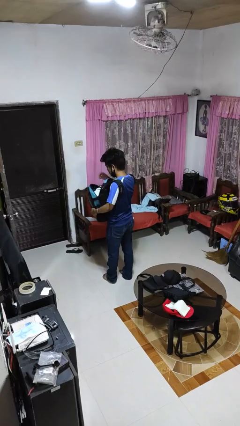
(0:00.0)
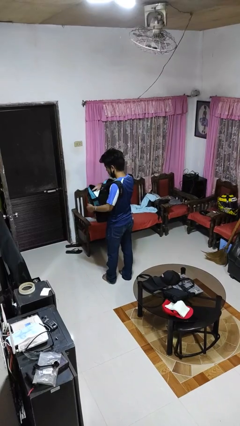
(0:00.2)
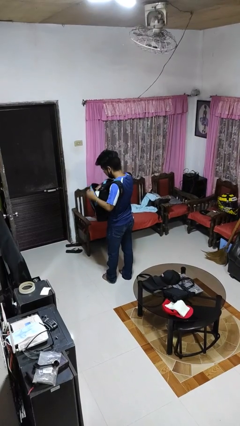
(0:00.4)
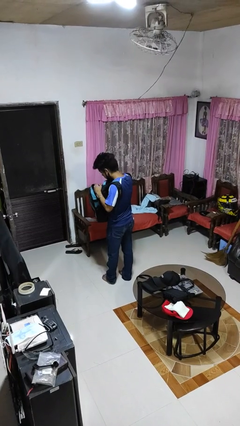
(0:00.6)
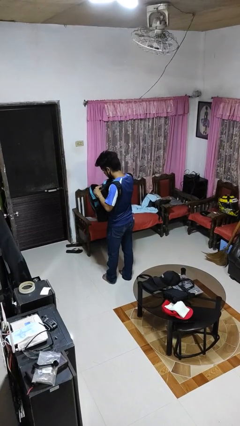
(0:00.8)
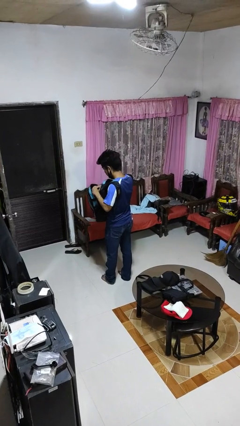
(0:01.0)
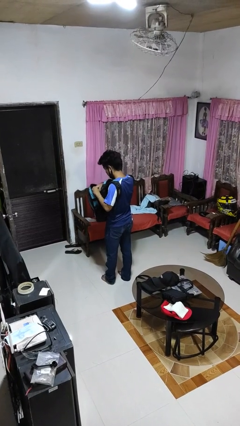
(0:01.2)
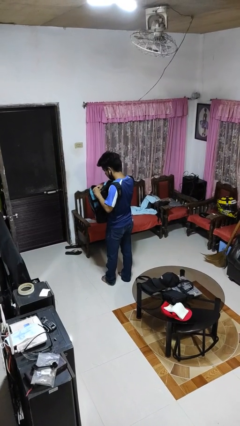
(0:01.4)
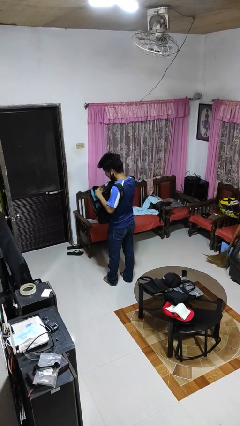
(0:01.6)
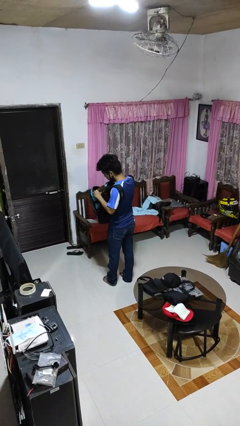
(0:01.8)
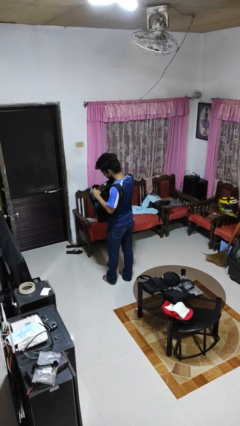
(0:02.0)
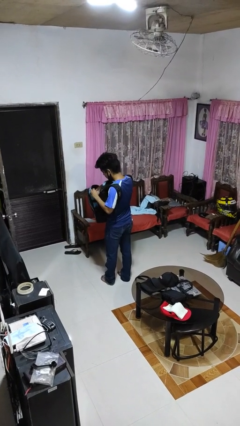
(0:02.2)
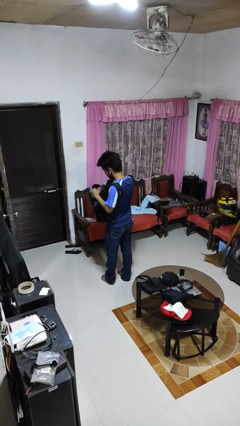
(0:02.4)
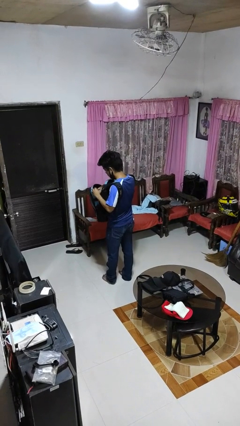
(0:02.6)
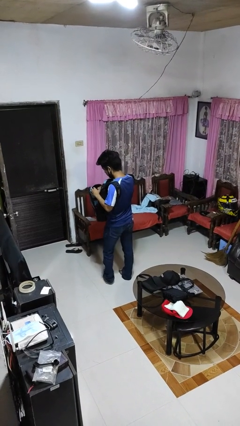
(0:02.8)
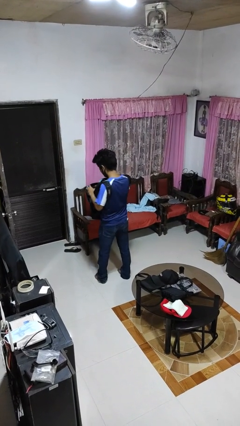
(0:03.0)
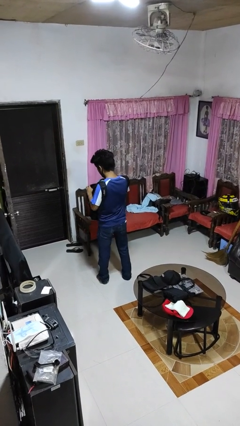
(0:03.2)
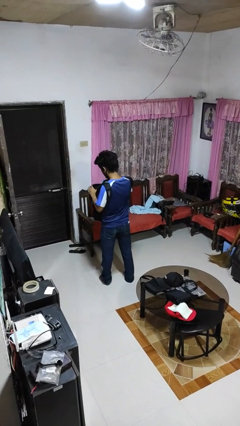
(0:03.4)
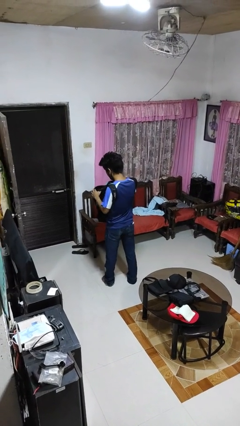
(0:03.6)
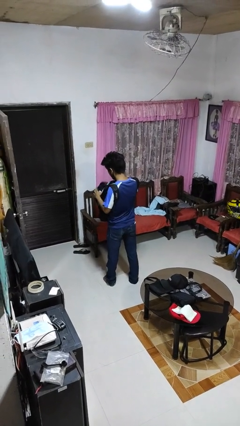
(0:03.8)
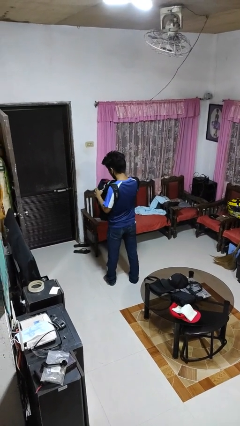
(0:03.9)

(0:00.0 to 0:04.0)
person searches in backpack

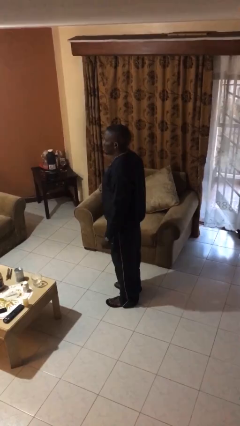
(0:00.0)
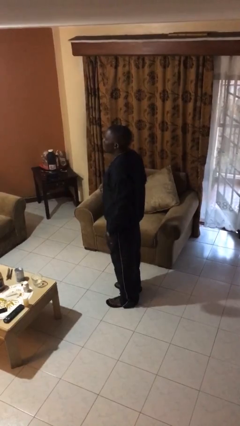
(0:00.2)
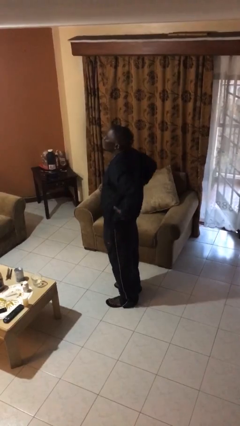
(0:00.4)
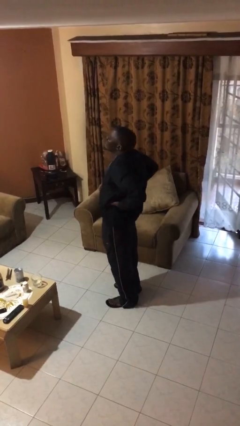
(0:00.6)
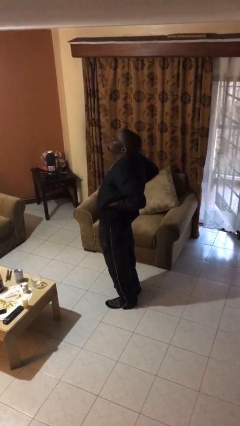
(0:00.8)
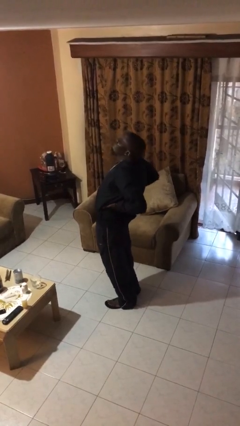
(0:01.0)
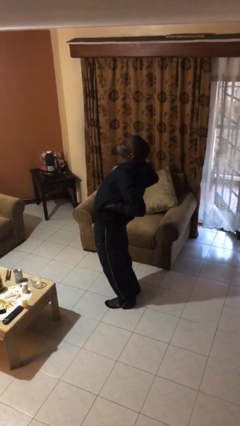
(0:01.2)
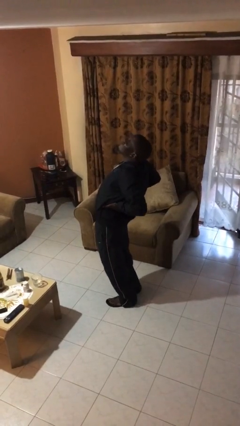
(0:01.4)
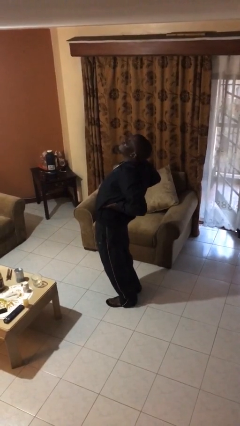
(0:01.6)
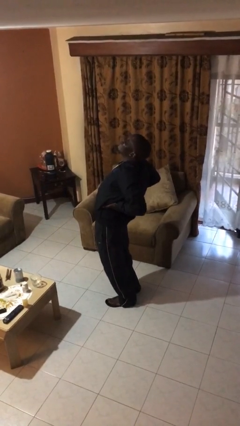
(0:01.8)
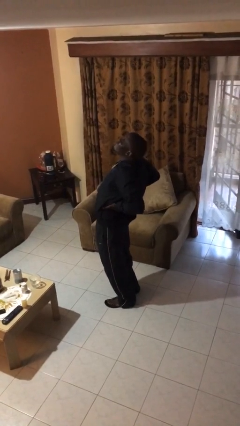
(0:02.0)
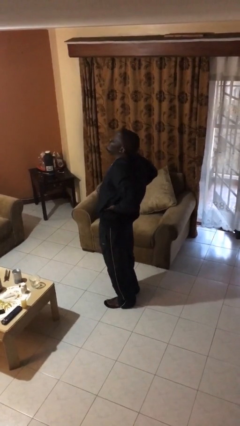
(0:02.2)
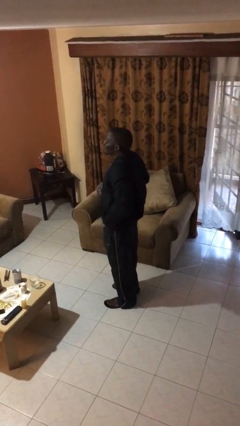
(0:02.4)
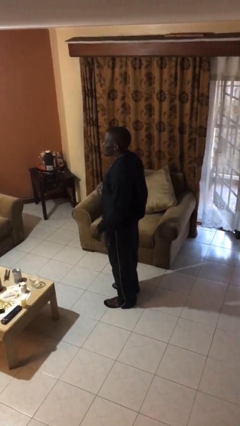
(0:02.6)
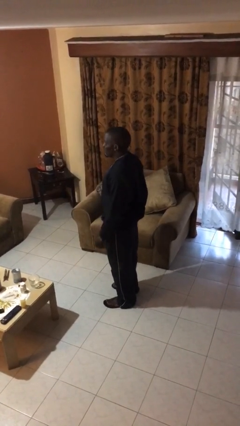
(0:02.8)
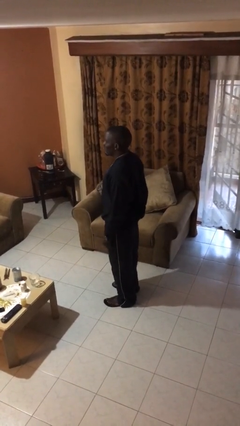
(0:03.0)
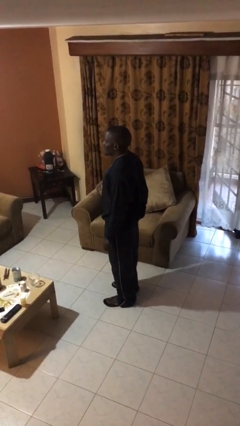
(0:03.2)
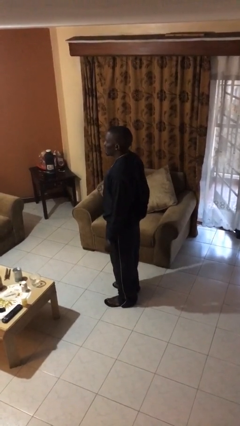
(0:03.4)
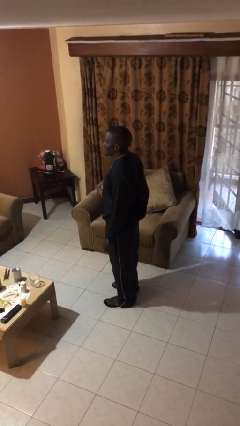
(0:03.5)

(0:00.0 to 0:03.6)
person stretches back

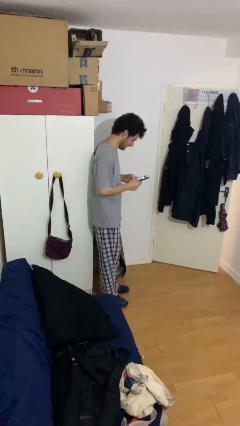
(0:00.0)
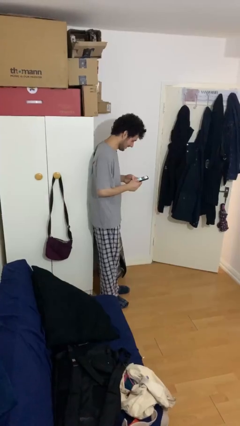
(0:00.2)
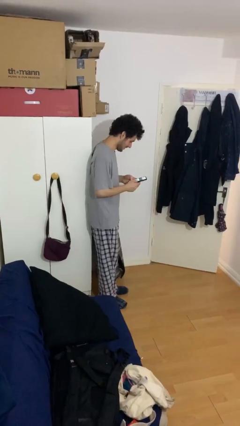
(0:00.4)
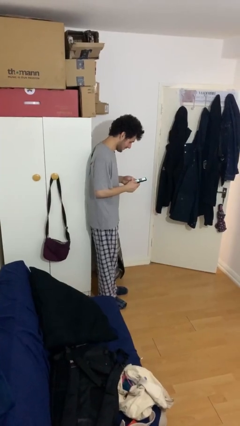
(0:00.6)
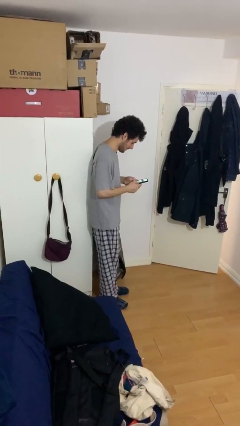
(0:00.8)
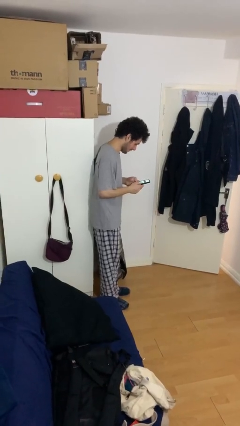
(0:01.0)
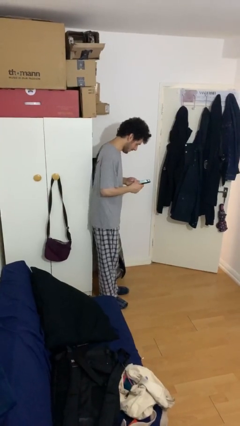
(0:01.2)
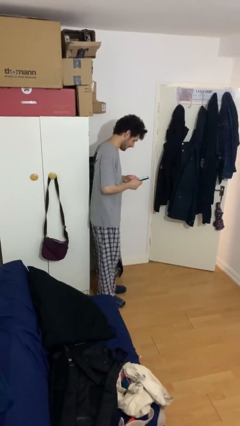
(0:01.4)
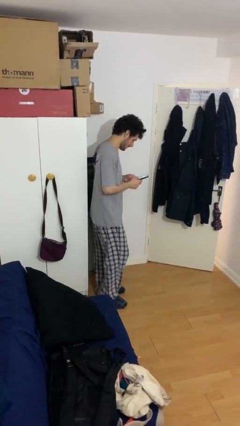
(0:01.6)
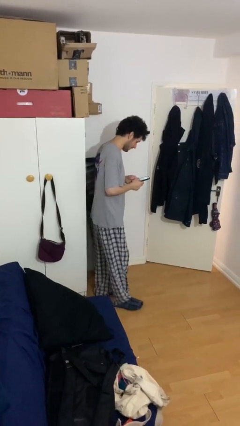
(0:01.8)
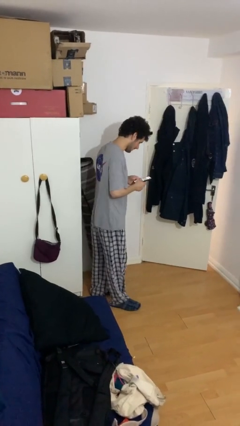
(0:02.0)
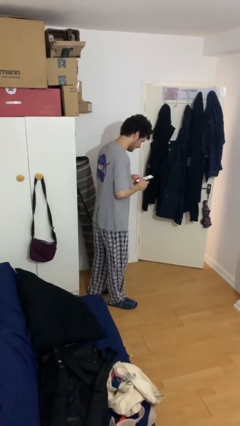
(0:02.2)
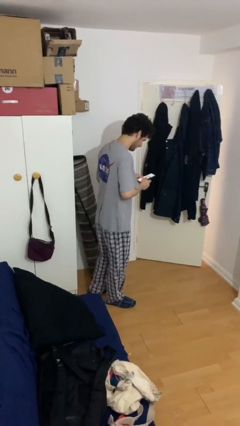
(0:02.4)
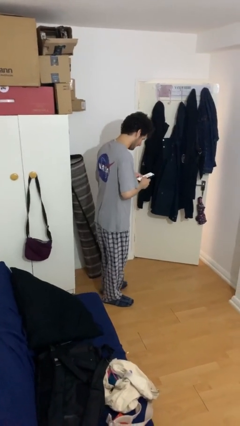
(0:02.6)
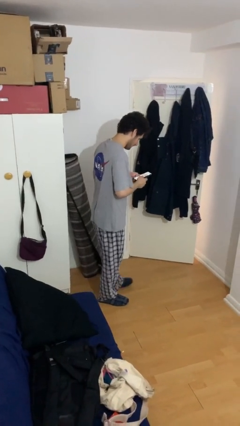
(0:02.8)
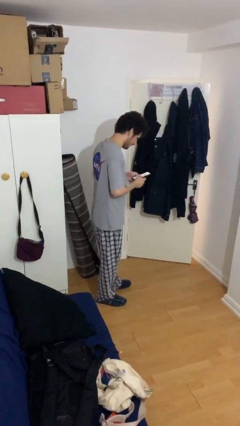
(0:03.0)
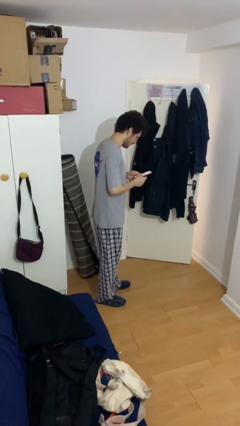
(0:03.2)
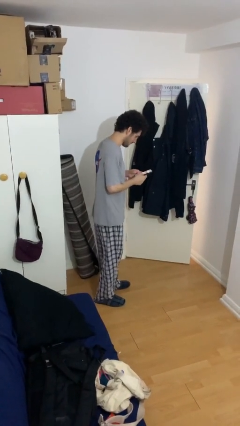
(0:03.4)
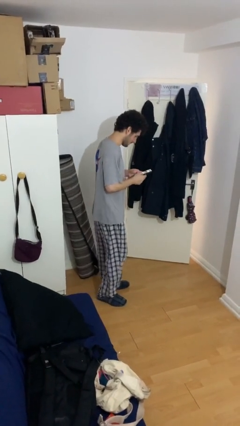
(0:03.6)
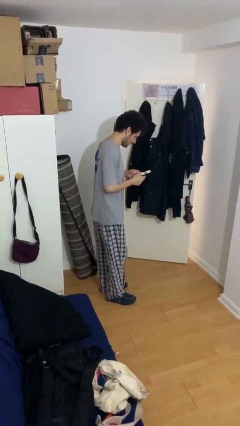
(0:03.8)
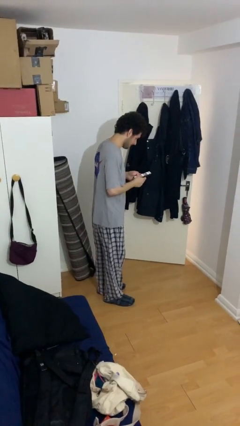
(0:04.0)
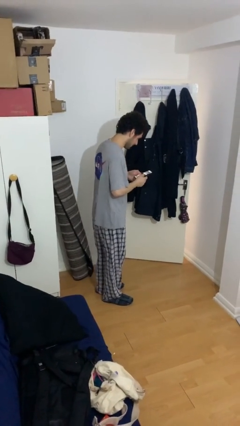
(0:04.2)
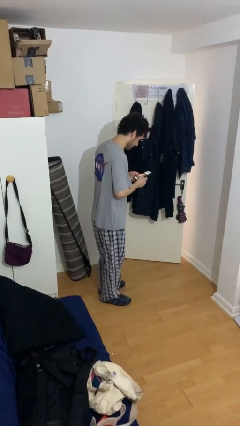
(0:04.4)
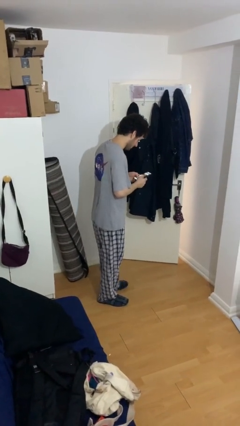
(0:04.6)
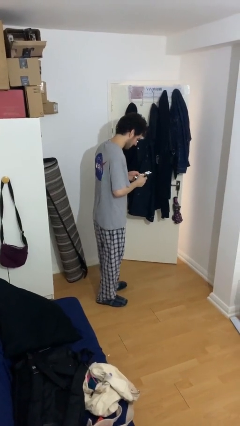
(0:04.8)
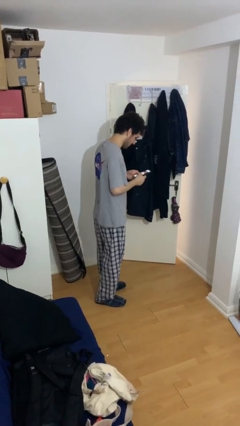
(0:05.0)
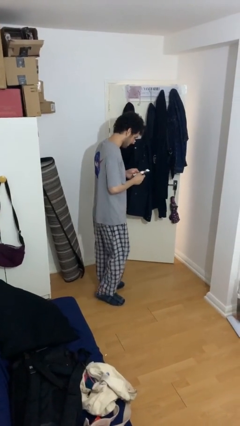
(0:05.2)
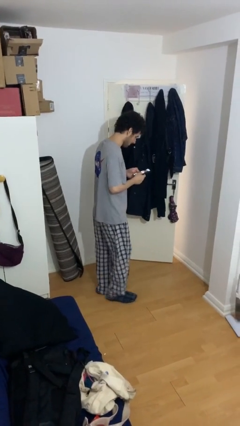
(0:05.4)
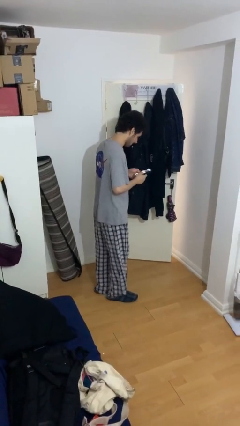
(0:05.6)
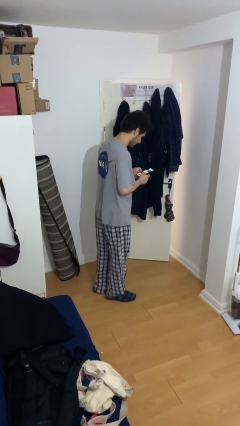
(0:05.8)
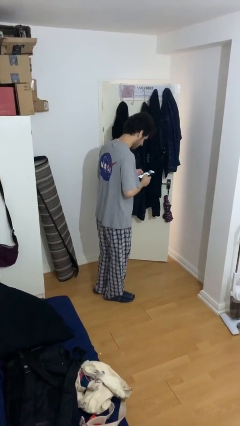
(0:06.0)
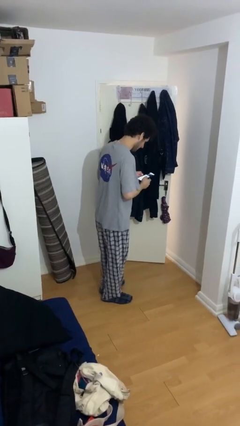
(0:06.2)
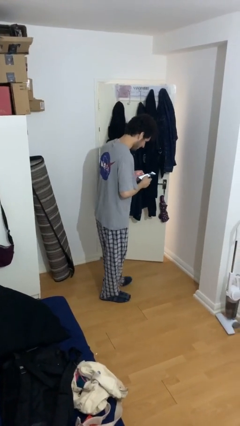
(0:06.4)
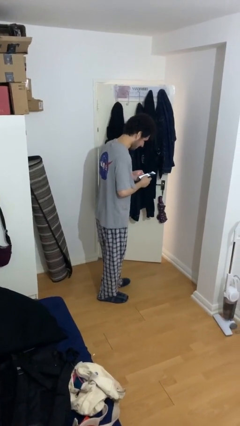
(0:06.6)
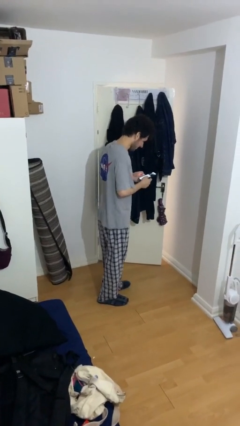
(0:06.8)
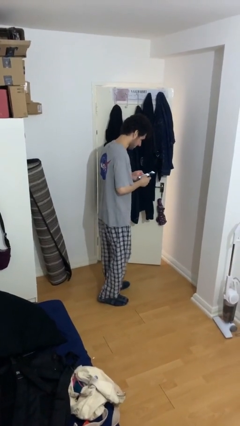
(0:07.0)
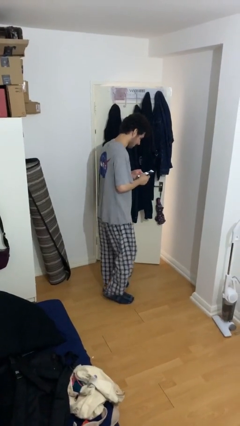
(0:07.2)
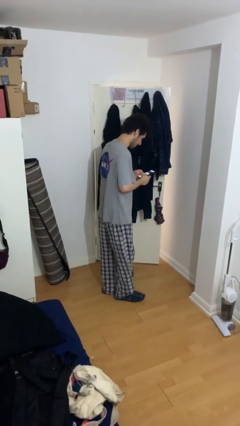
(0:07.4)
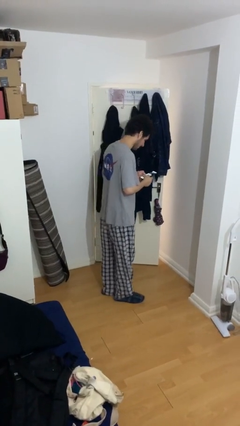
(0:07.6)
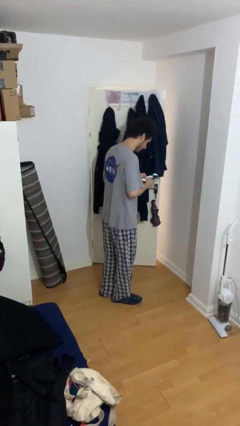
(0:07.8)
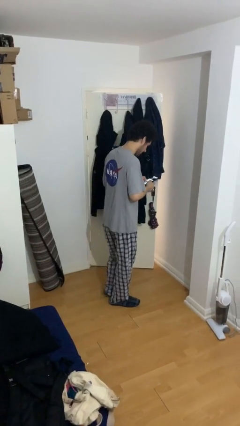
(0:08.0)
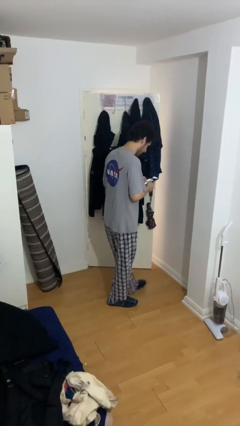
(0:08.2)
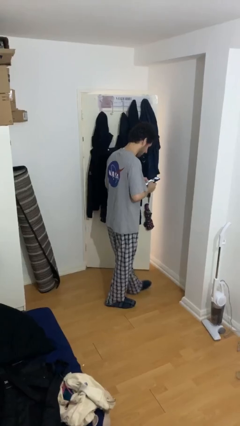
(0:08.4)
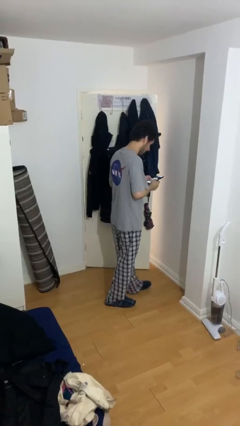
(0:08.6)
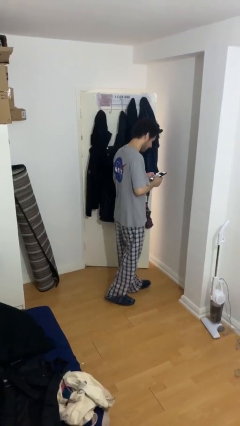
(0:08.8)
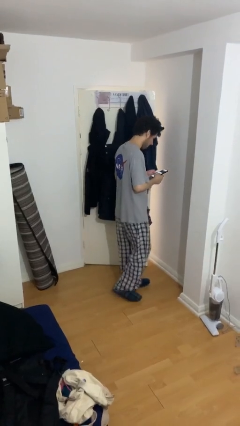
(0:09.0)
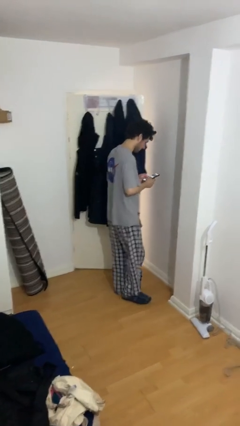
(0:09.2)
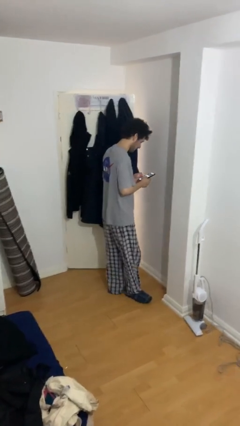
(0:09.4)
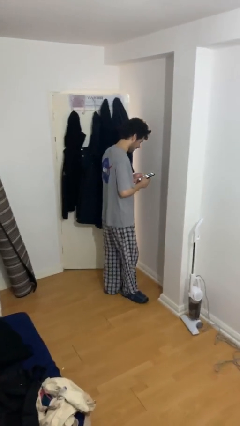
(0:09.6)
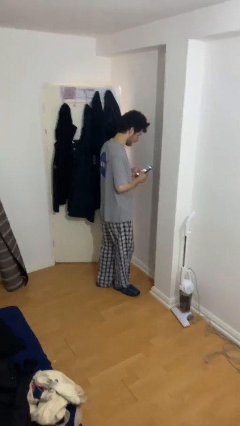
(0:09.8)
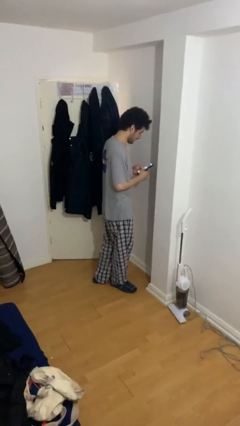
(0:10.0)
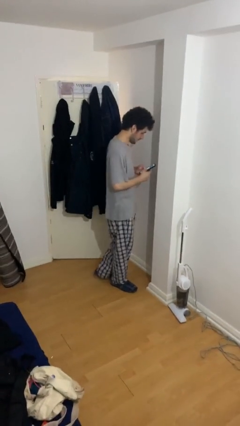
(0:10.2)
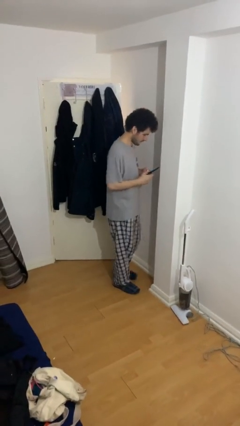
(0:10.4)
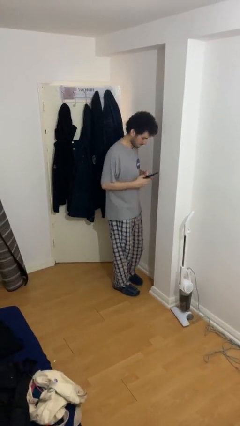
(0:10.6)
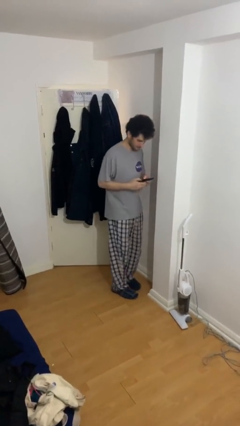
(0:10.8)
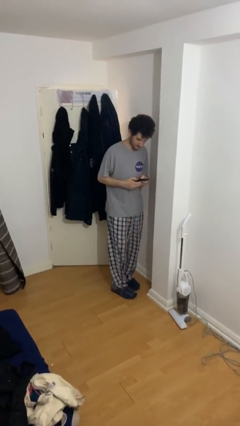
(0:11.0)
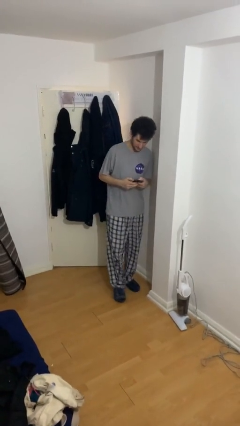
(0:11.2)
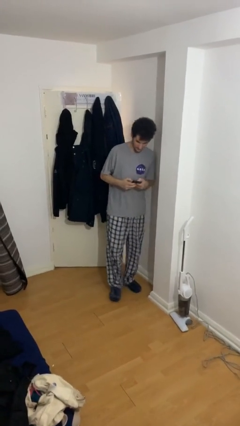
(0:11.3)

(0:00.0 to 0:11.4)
person texts on phone
